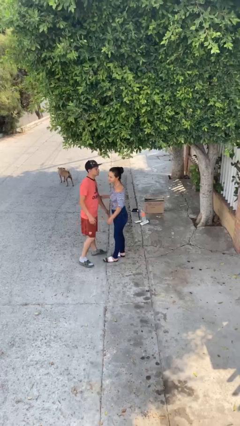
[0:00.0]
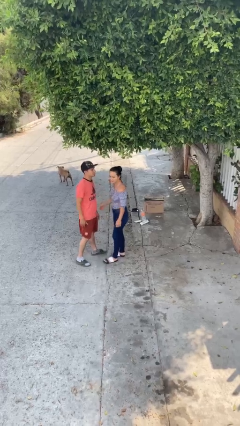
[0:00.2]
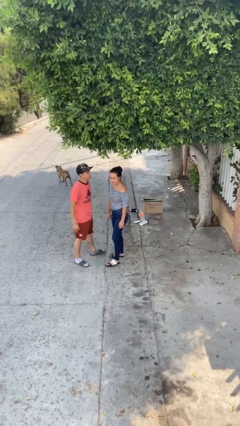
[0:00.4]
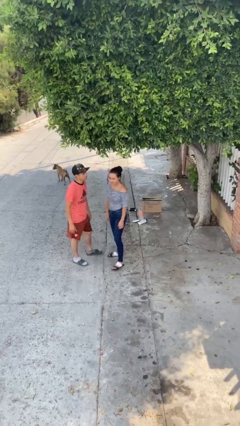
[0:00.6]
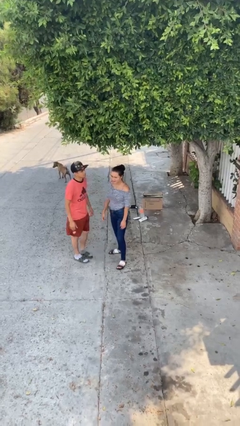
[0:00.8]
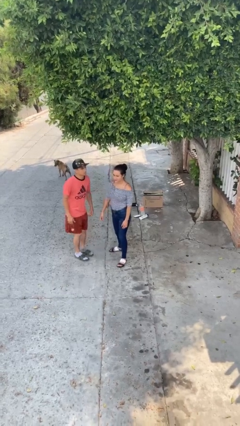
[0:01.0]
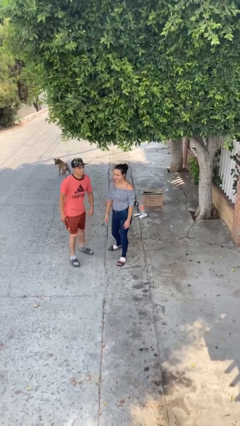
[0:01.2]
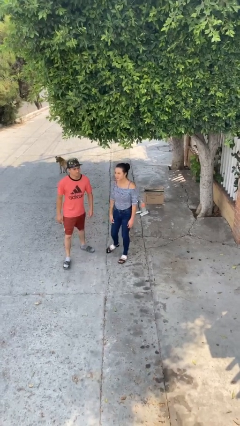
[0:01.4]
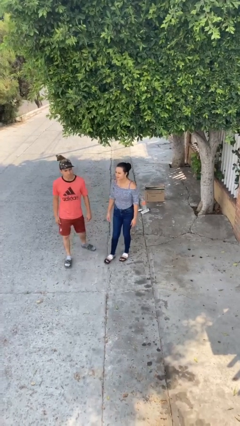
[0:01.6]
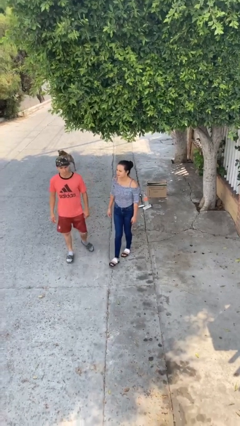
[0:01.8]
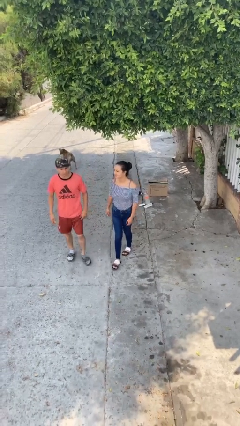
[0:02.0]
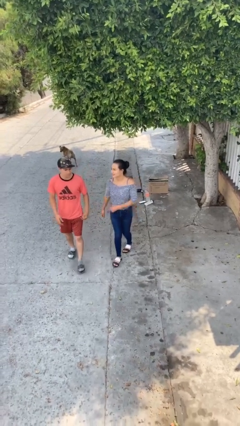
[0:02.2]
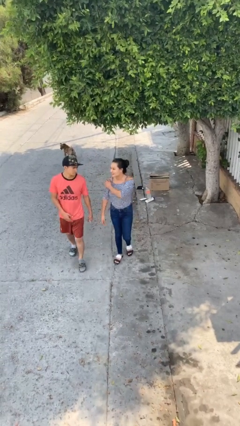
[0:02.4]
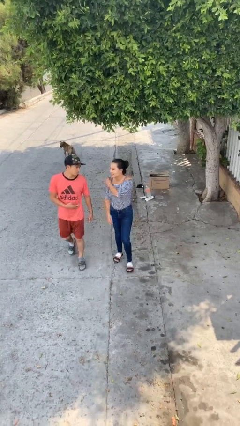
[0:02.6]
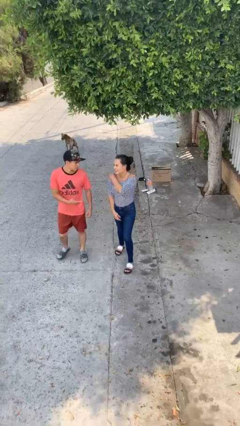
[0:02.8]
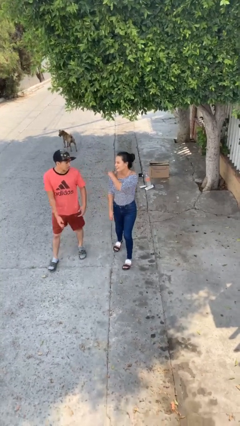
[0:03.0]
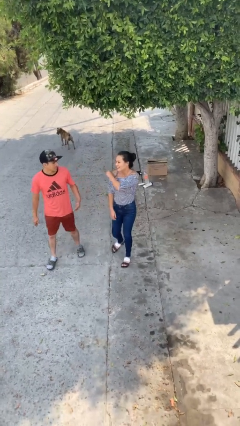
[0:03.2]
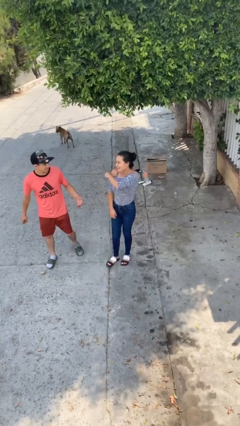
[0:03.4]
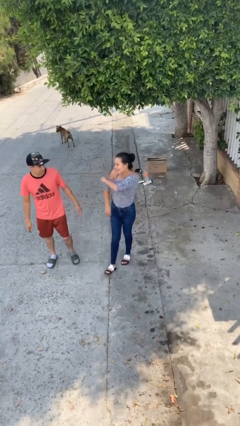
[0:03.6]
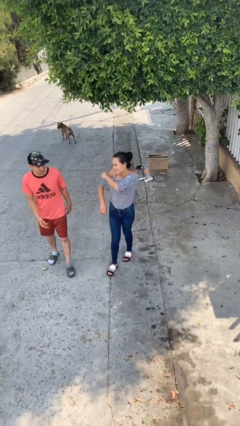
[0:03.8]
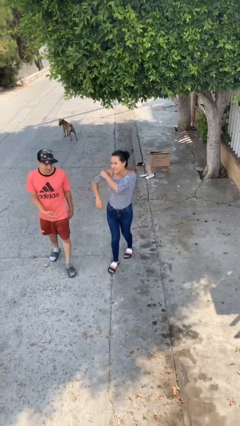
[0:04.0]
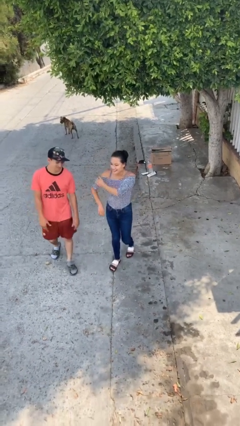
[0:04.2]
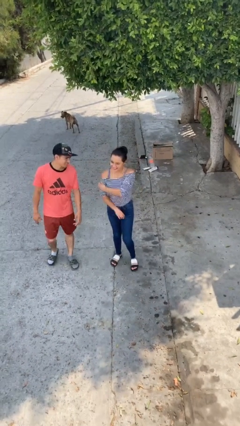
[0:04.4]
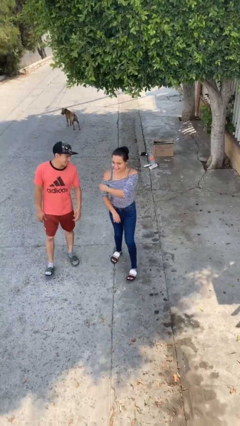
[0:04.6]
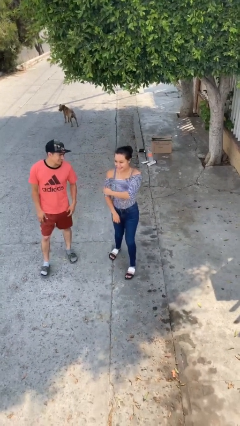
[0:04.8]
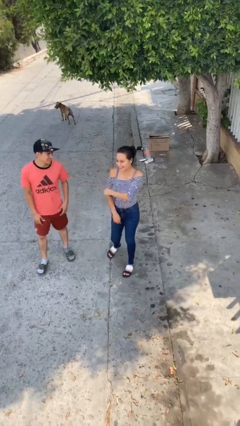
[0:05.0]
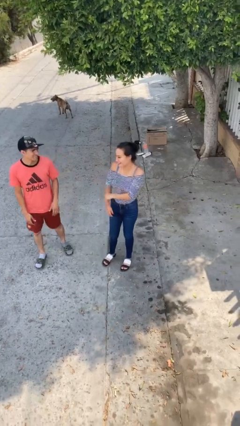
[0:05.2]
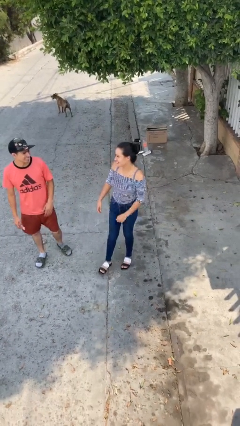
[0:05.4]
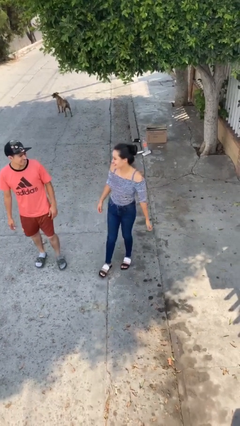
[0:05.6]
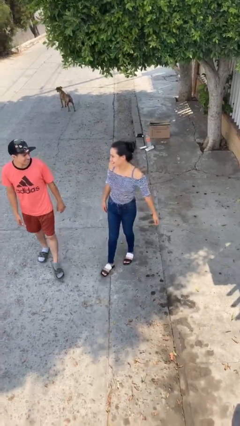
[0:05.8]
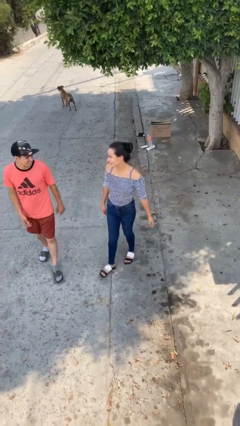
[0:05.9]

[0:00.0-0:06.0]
person talks to person

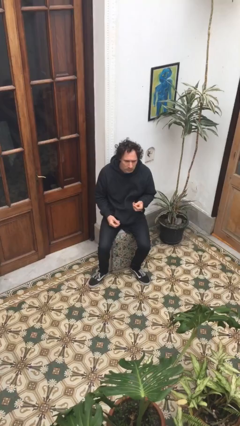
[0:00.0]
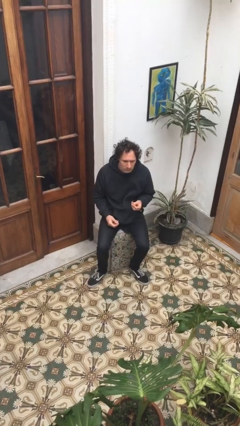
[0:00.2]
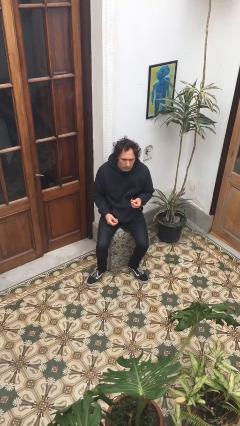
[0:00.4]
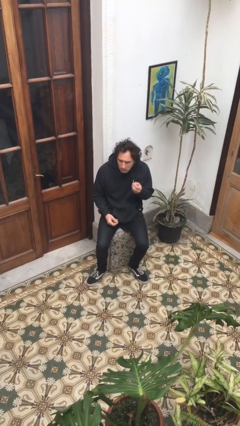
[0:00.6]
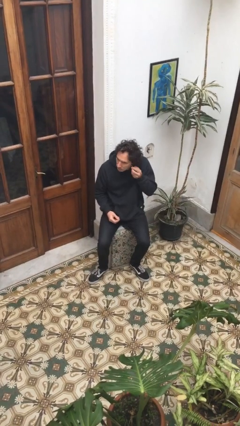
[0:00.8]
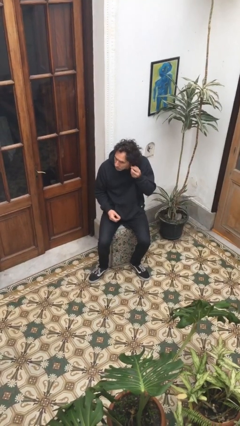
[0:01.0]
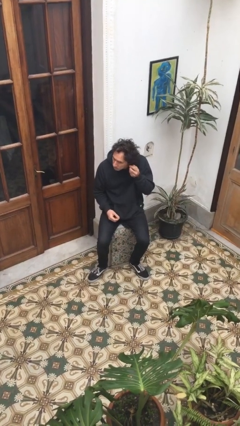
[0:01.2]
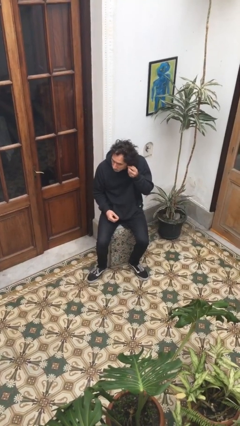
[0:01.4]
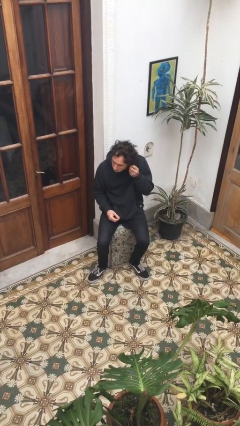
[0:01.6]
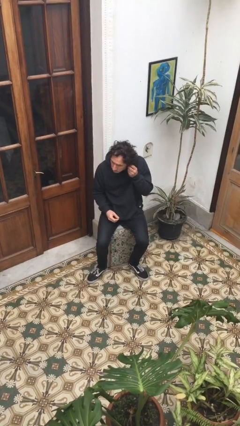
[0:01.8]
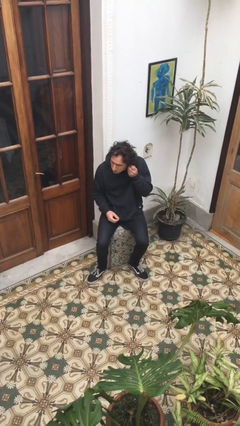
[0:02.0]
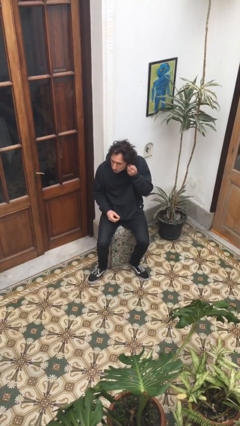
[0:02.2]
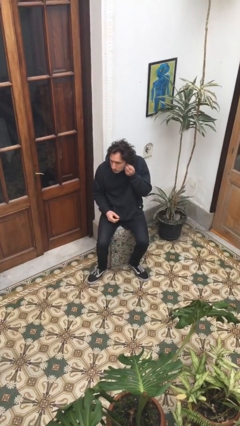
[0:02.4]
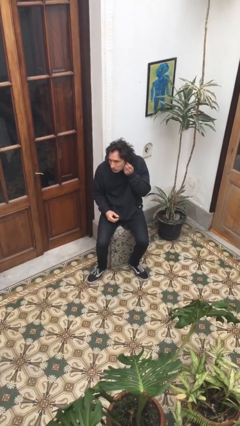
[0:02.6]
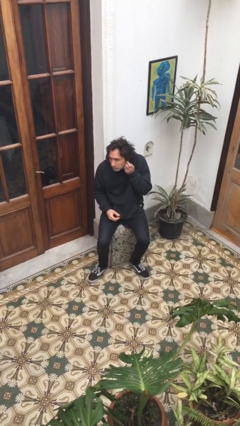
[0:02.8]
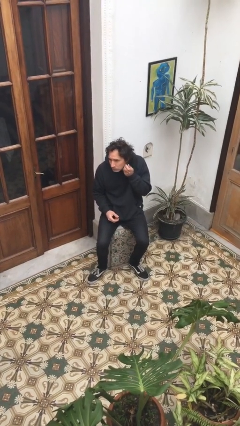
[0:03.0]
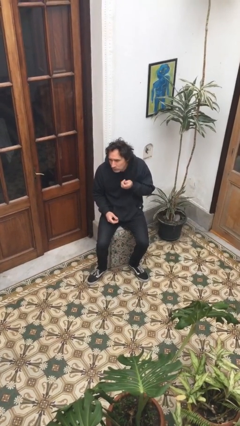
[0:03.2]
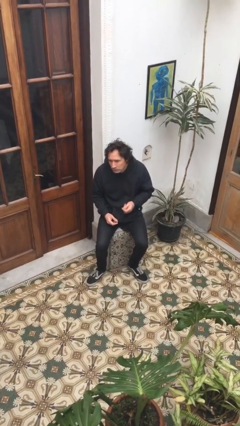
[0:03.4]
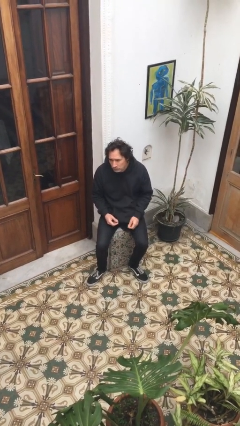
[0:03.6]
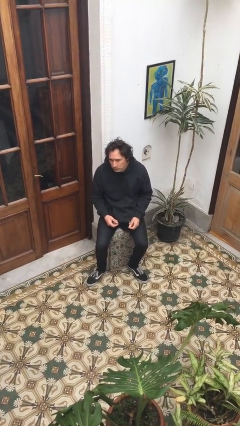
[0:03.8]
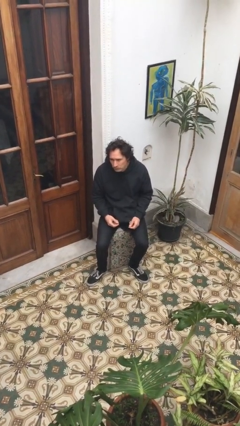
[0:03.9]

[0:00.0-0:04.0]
person puts on earrings

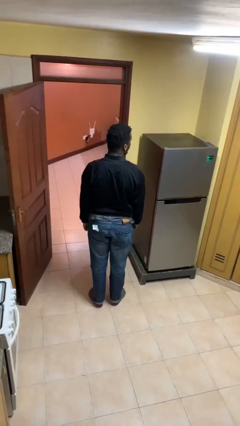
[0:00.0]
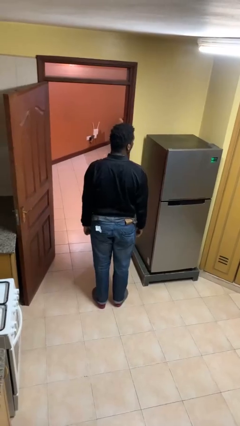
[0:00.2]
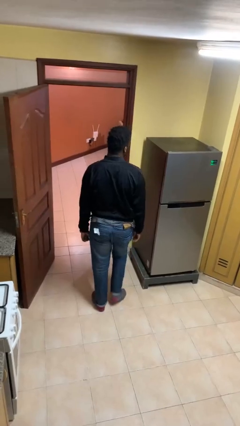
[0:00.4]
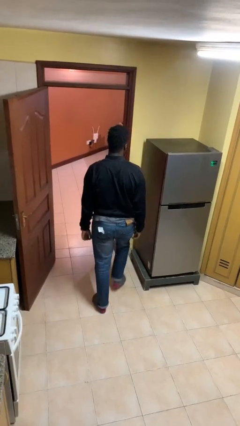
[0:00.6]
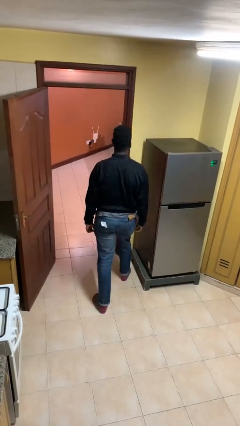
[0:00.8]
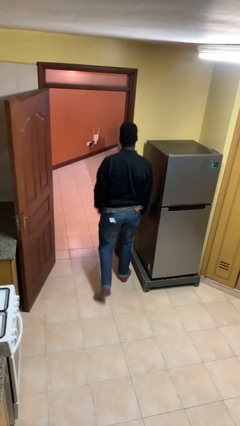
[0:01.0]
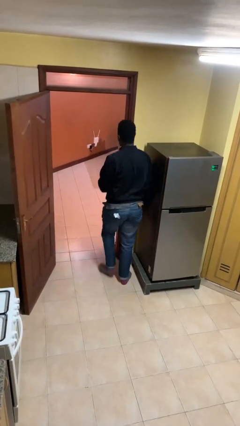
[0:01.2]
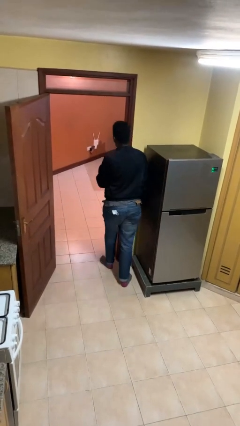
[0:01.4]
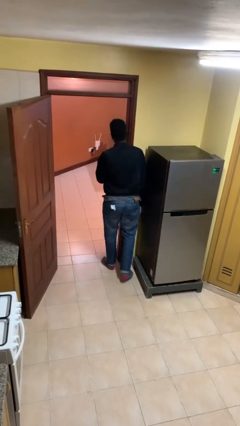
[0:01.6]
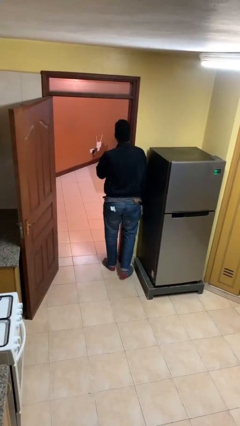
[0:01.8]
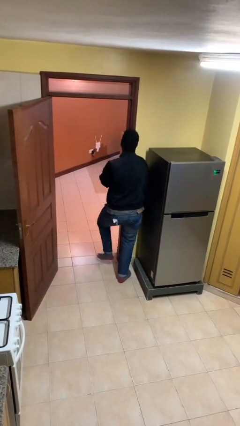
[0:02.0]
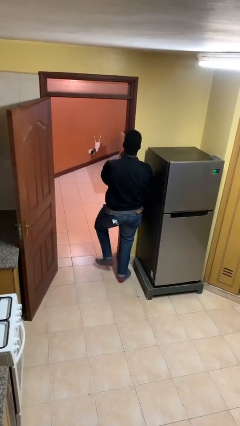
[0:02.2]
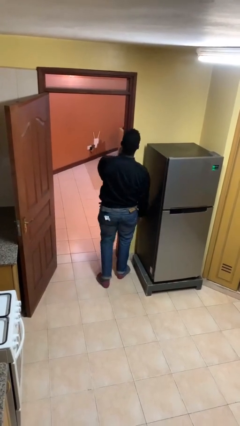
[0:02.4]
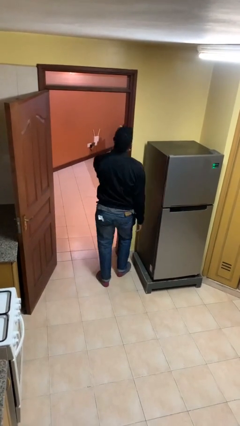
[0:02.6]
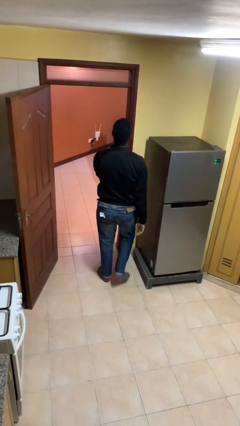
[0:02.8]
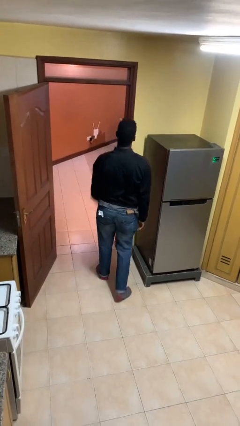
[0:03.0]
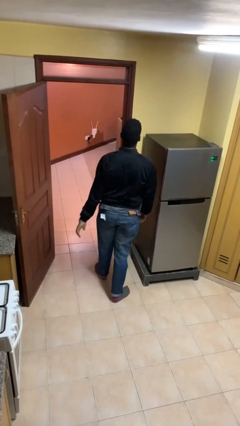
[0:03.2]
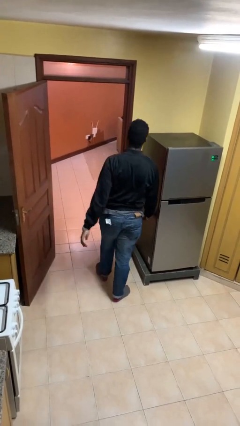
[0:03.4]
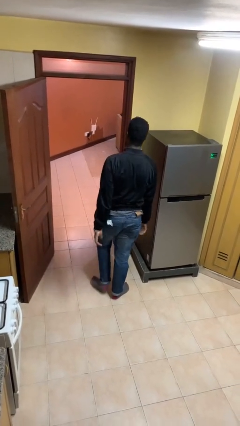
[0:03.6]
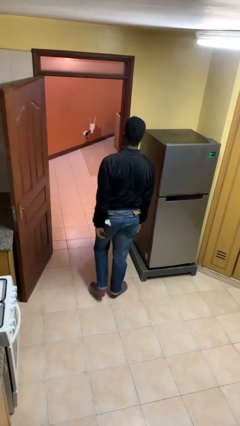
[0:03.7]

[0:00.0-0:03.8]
person bumps into wall

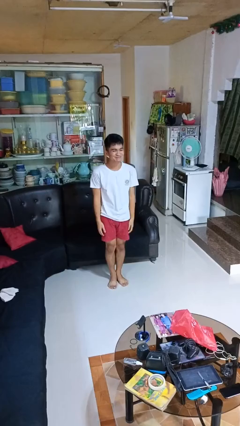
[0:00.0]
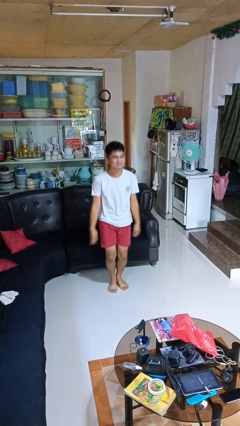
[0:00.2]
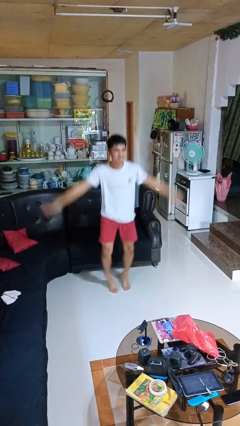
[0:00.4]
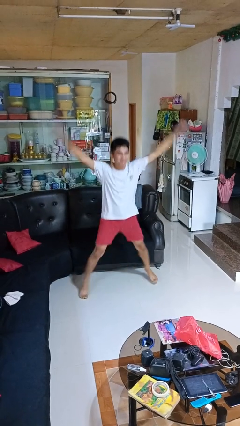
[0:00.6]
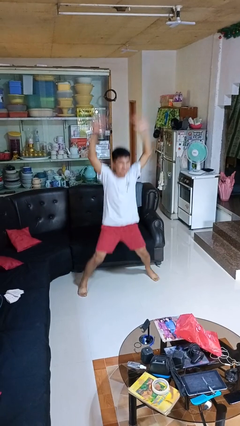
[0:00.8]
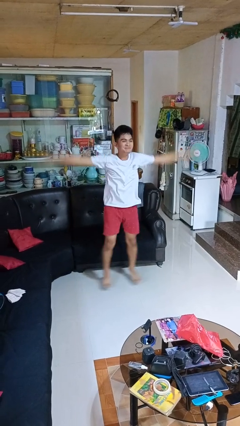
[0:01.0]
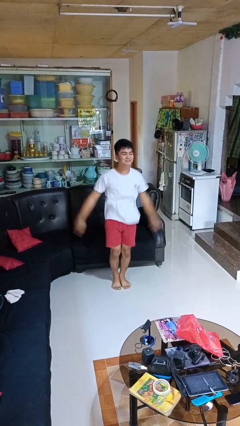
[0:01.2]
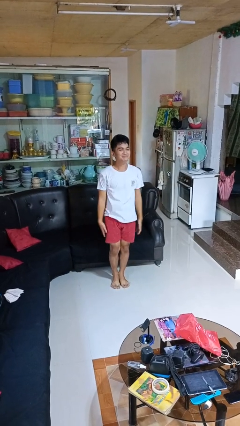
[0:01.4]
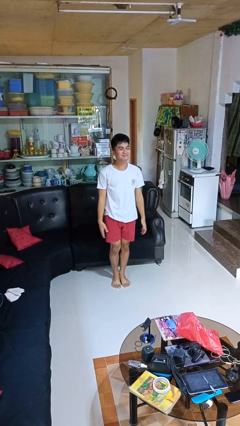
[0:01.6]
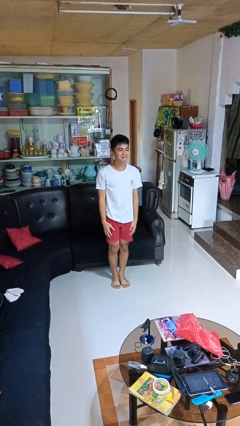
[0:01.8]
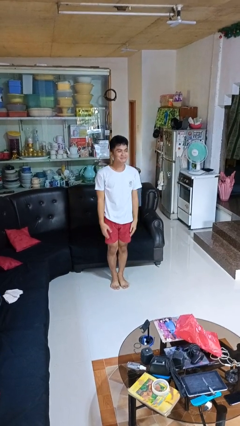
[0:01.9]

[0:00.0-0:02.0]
person exercises with jumping jacks

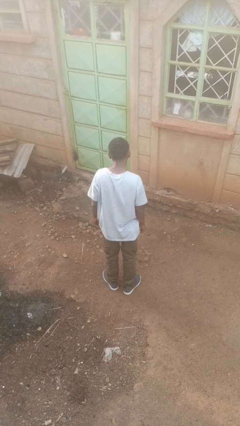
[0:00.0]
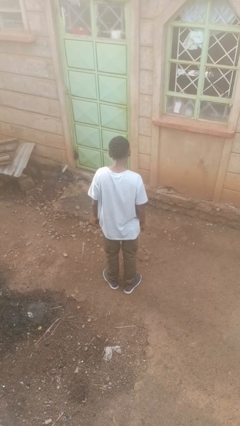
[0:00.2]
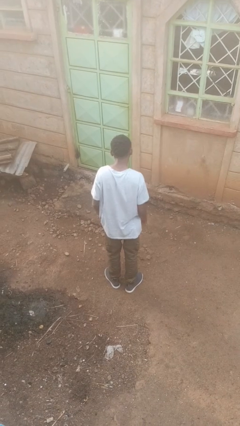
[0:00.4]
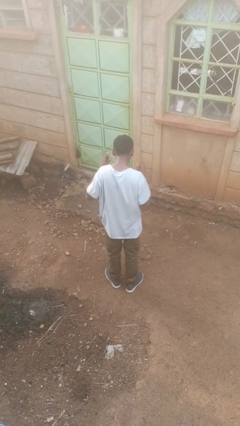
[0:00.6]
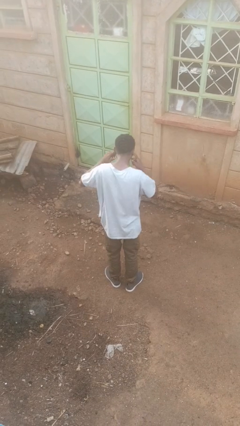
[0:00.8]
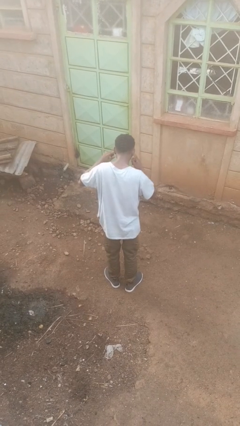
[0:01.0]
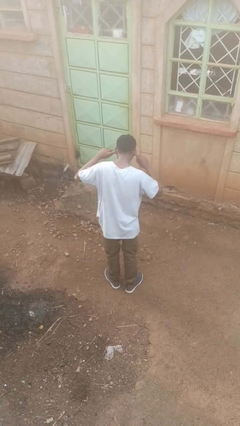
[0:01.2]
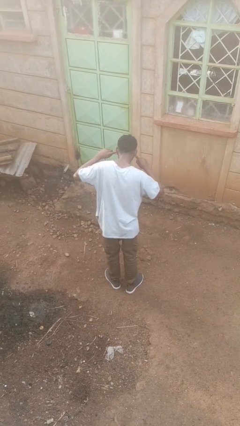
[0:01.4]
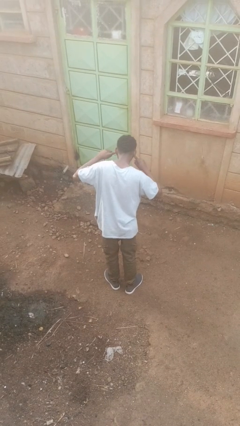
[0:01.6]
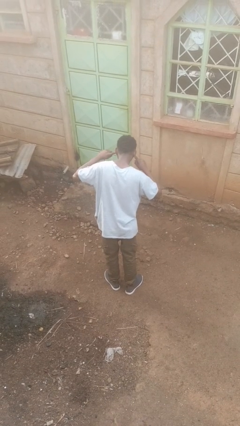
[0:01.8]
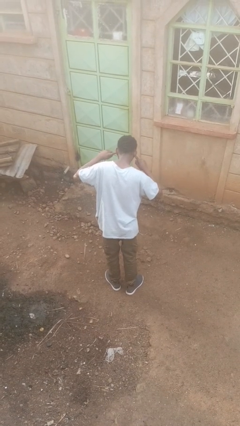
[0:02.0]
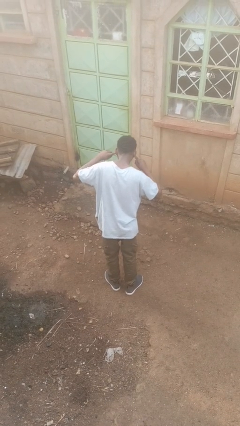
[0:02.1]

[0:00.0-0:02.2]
person puts fingers in ear
